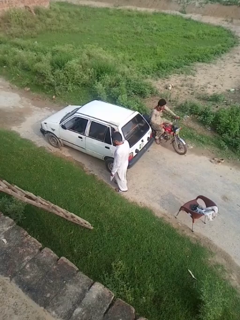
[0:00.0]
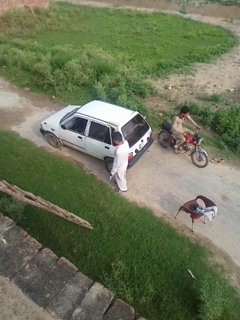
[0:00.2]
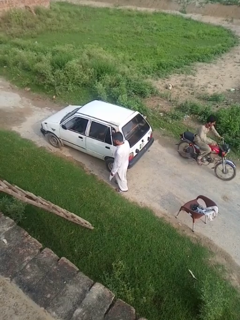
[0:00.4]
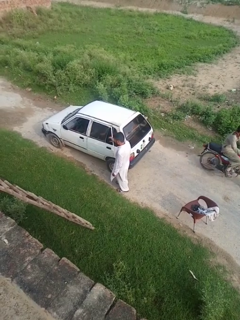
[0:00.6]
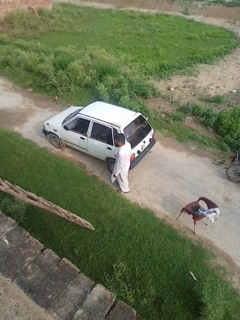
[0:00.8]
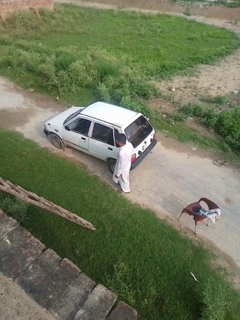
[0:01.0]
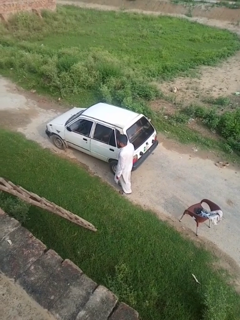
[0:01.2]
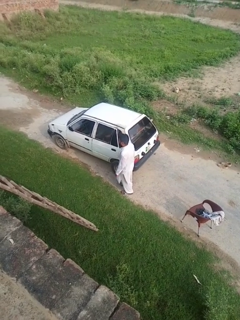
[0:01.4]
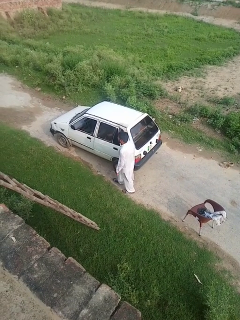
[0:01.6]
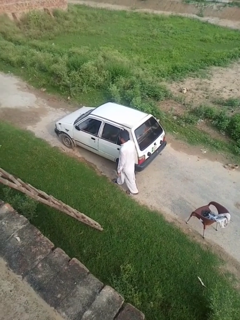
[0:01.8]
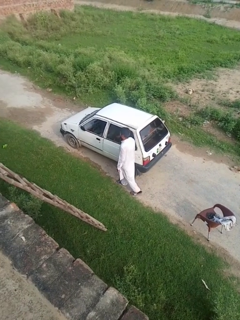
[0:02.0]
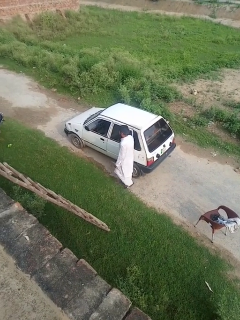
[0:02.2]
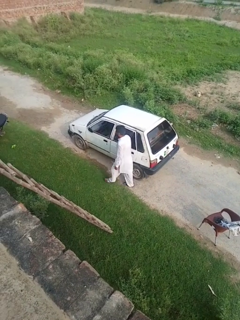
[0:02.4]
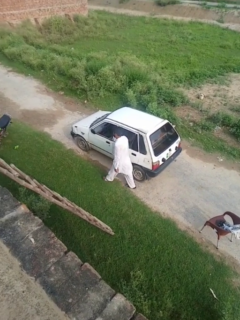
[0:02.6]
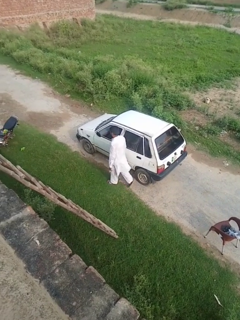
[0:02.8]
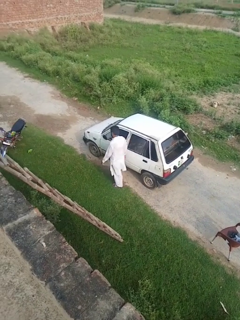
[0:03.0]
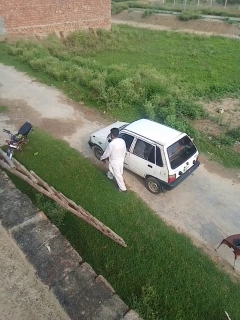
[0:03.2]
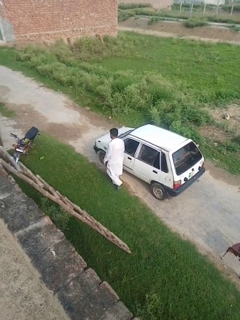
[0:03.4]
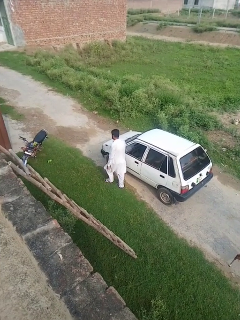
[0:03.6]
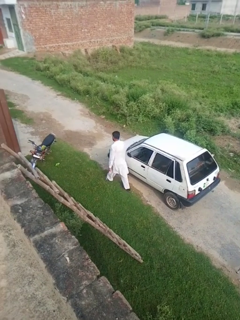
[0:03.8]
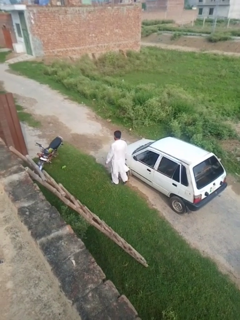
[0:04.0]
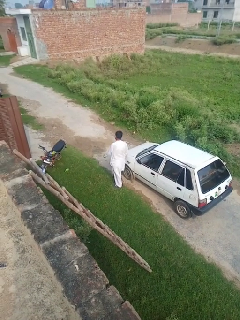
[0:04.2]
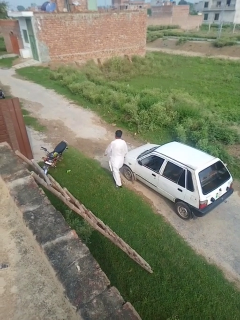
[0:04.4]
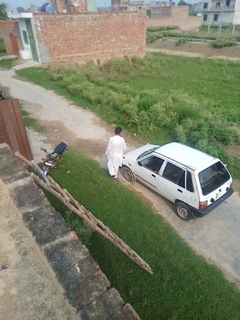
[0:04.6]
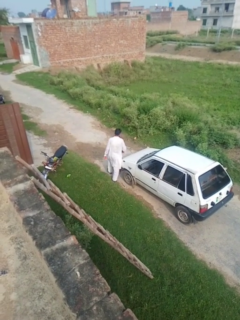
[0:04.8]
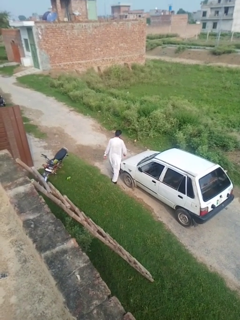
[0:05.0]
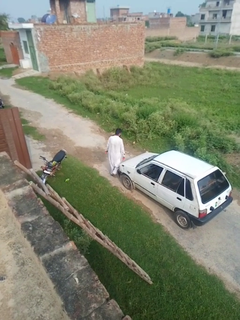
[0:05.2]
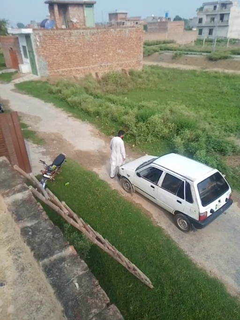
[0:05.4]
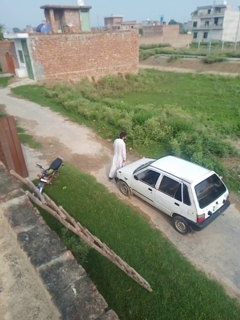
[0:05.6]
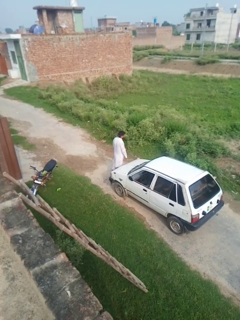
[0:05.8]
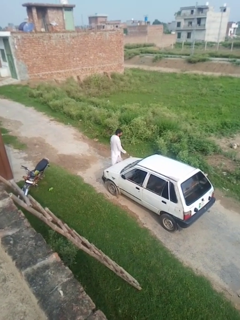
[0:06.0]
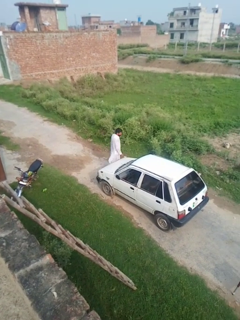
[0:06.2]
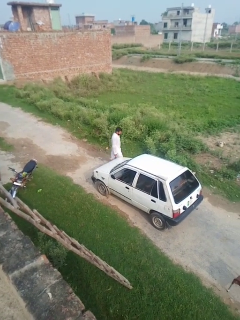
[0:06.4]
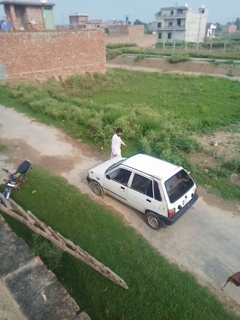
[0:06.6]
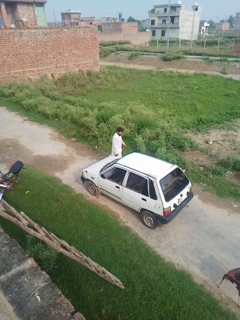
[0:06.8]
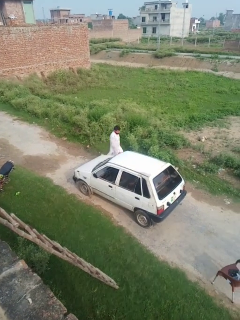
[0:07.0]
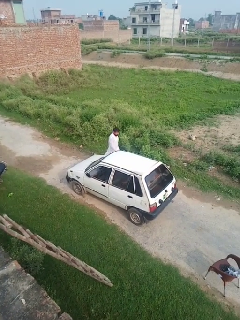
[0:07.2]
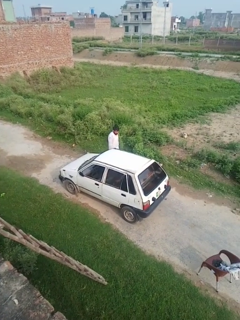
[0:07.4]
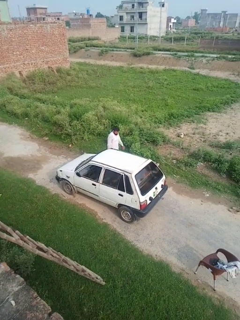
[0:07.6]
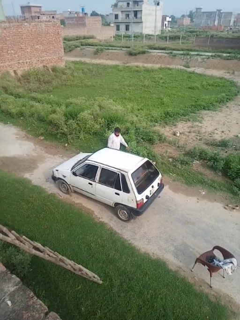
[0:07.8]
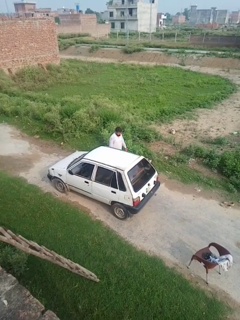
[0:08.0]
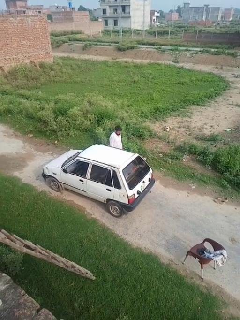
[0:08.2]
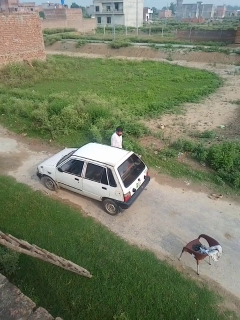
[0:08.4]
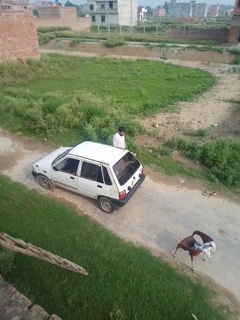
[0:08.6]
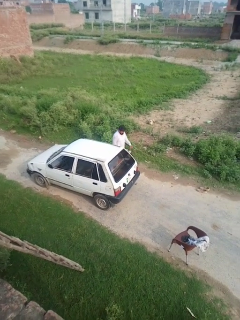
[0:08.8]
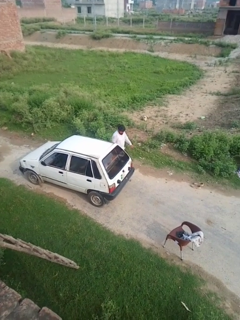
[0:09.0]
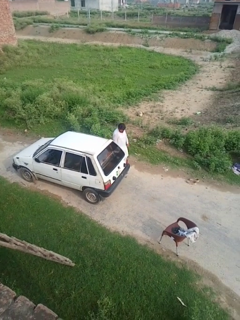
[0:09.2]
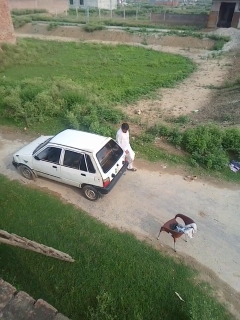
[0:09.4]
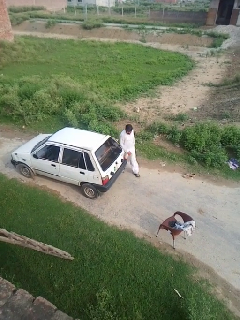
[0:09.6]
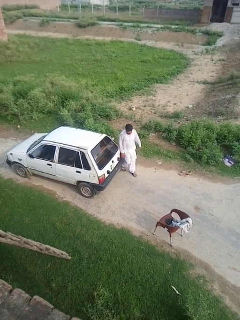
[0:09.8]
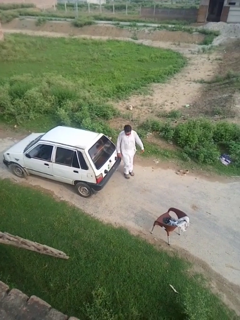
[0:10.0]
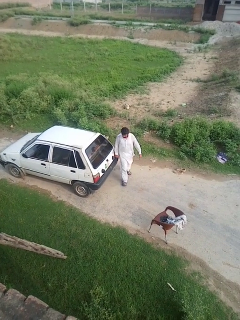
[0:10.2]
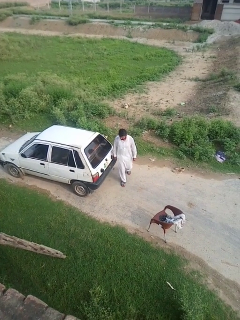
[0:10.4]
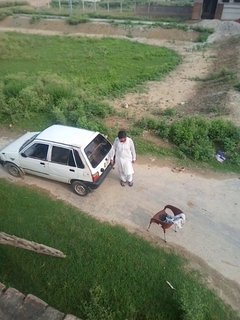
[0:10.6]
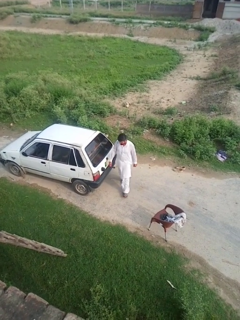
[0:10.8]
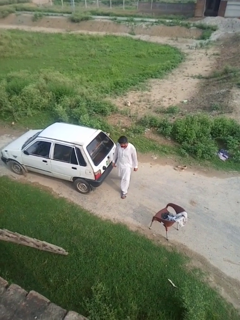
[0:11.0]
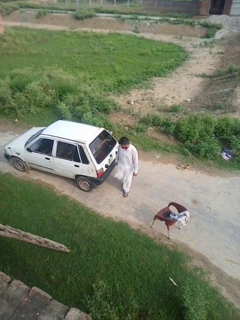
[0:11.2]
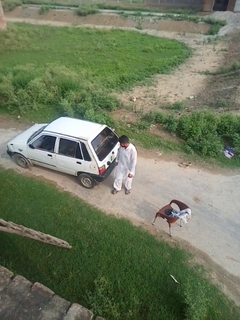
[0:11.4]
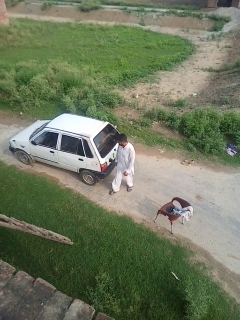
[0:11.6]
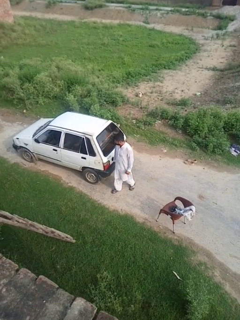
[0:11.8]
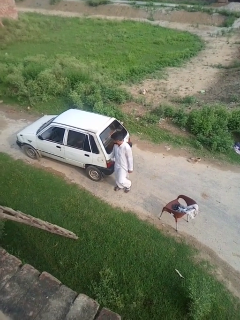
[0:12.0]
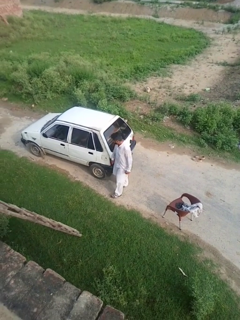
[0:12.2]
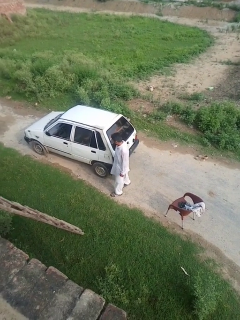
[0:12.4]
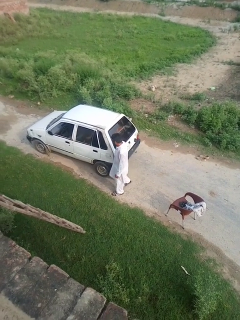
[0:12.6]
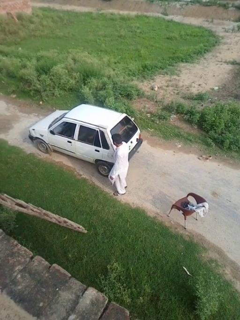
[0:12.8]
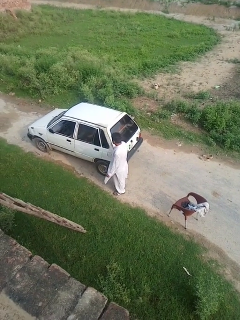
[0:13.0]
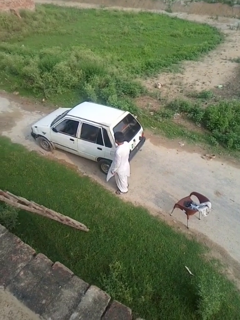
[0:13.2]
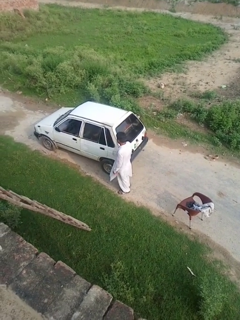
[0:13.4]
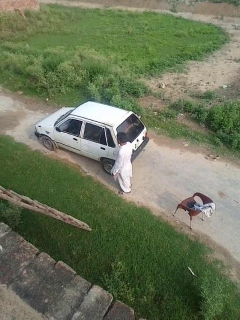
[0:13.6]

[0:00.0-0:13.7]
person walks around car

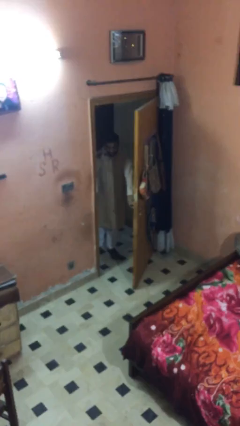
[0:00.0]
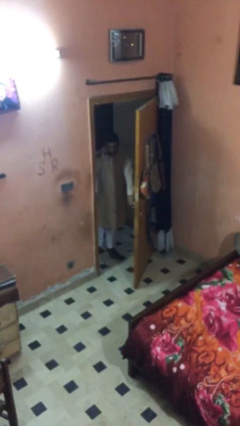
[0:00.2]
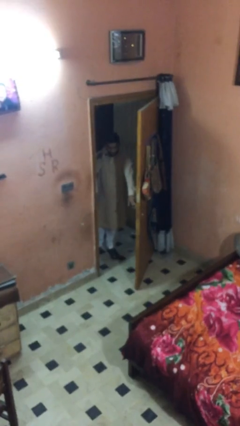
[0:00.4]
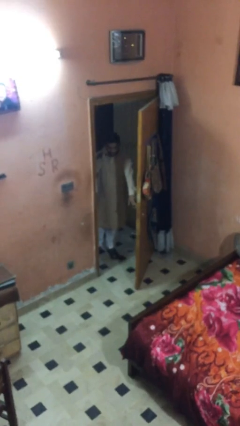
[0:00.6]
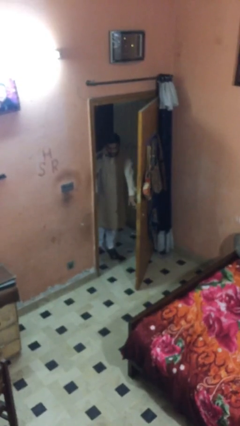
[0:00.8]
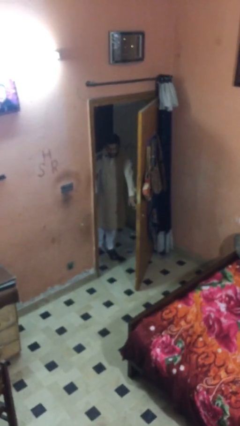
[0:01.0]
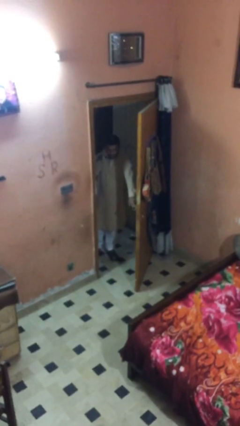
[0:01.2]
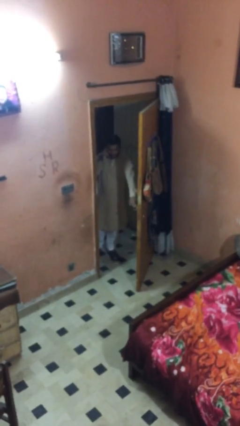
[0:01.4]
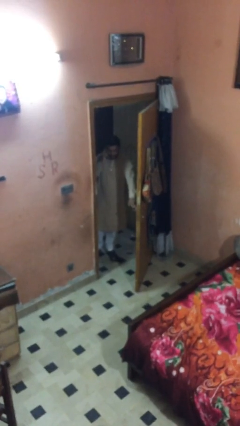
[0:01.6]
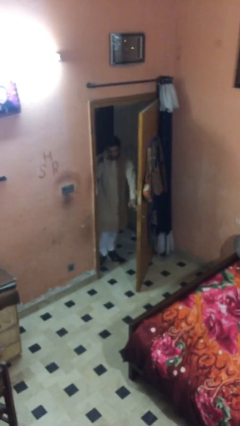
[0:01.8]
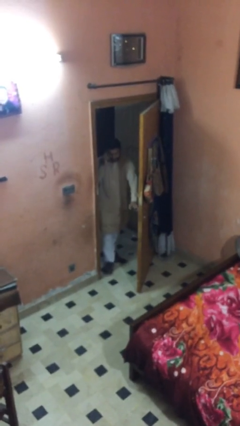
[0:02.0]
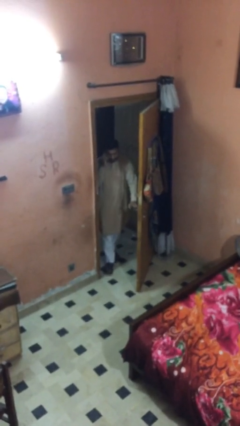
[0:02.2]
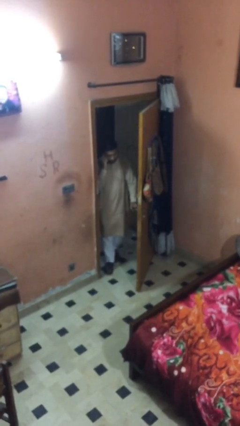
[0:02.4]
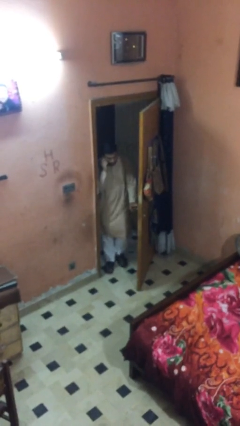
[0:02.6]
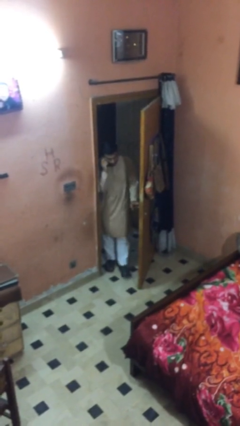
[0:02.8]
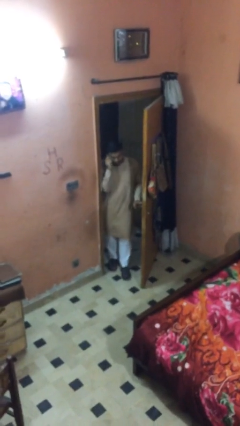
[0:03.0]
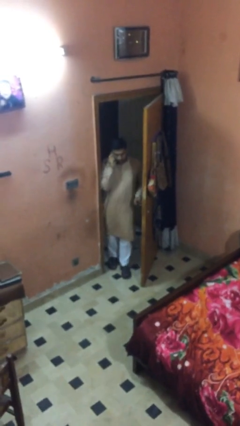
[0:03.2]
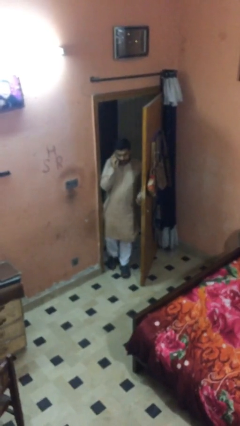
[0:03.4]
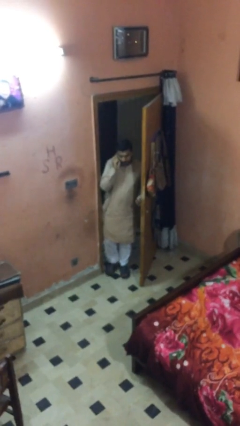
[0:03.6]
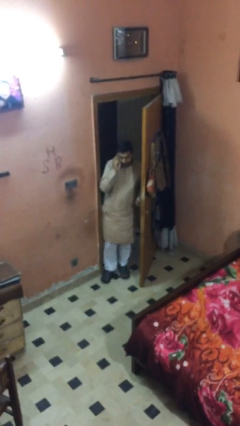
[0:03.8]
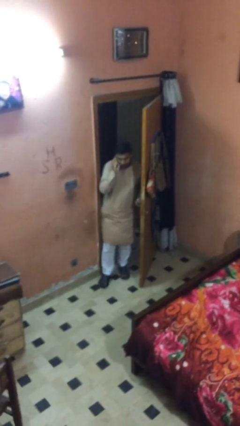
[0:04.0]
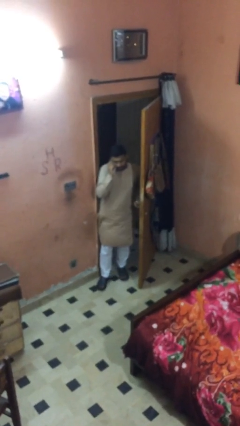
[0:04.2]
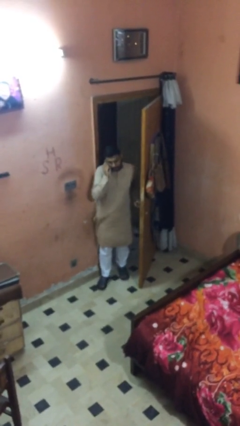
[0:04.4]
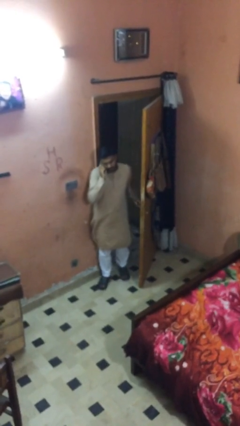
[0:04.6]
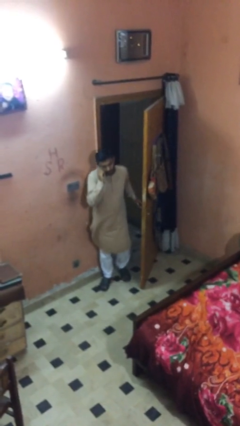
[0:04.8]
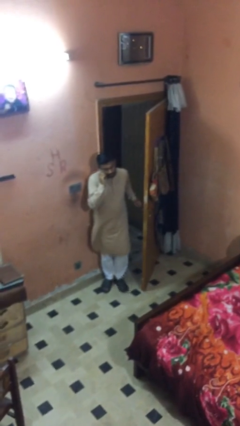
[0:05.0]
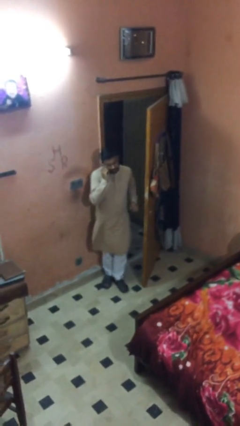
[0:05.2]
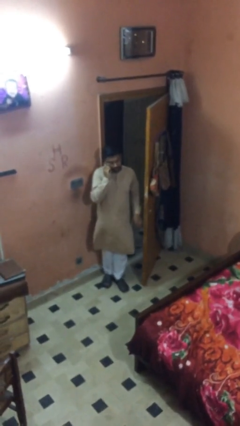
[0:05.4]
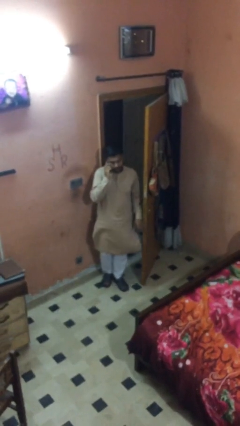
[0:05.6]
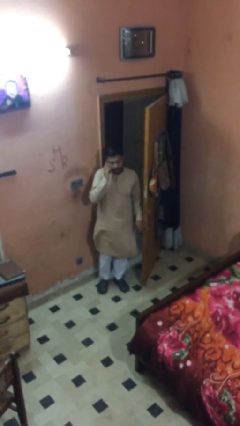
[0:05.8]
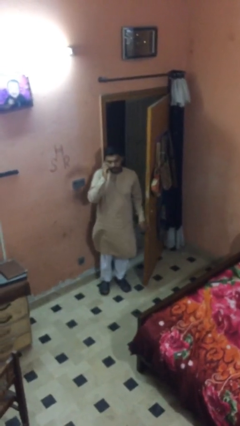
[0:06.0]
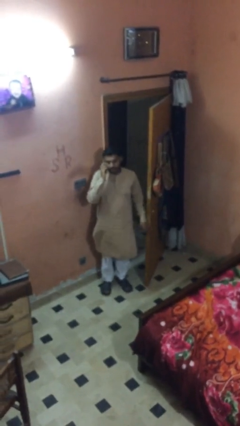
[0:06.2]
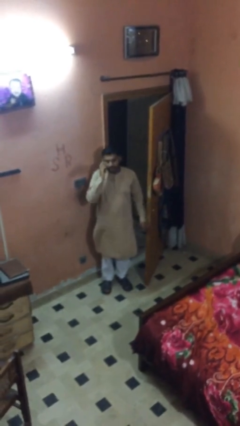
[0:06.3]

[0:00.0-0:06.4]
person enters scene through structure

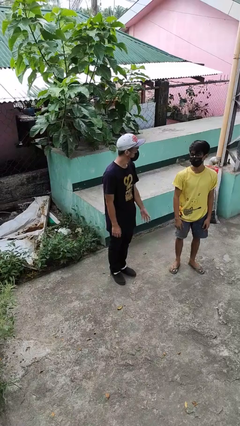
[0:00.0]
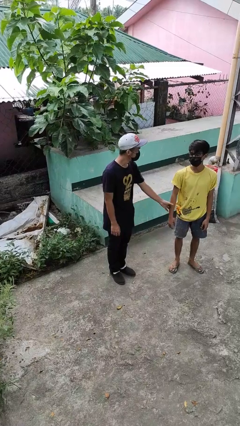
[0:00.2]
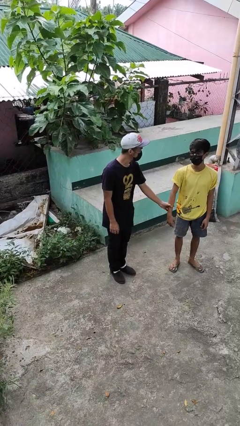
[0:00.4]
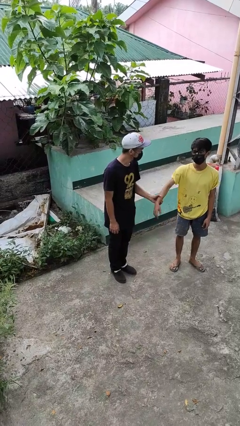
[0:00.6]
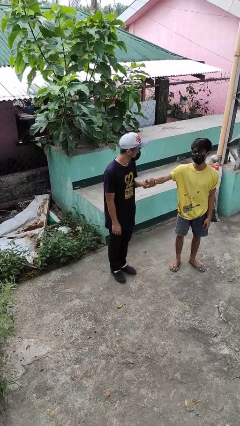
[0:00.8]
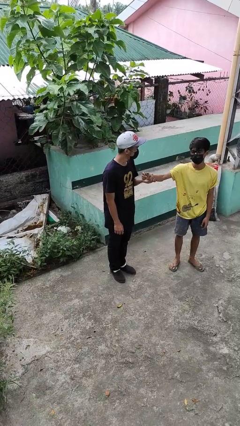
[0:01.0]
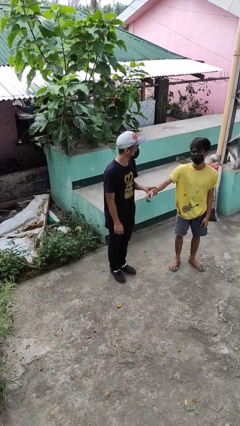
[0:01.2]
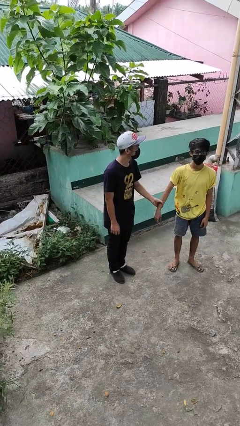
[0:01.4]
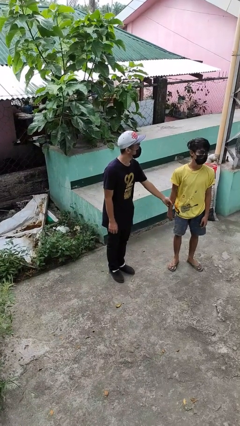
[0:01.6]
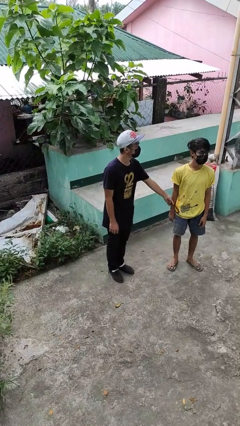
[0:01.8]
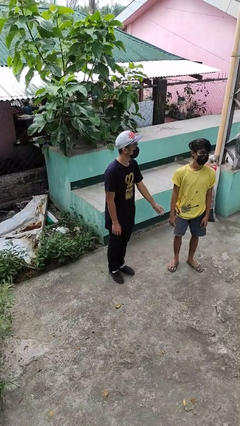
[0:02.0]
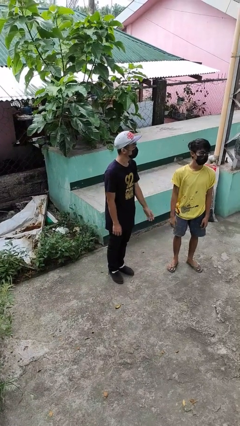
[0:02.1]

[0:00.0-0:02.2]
person grabs person by forearm
